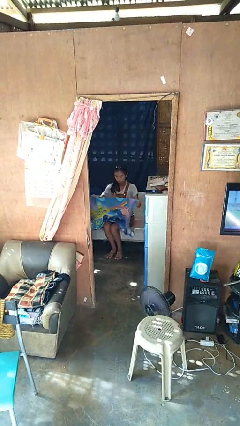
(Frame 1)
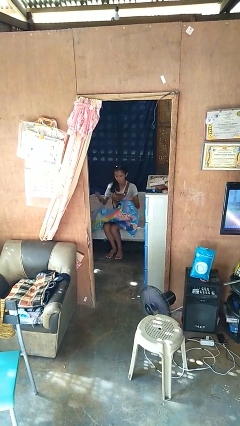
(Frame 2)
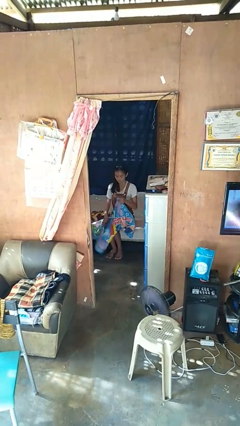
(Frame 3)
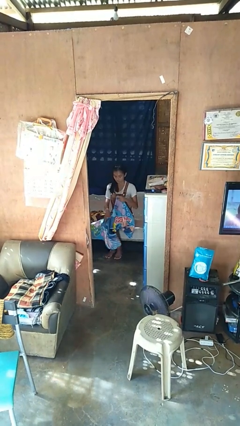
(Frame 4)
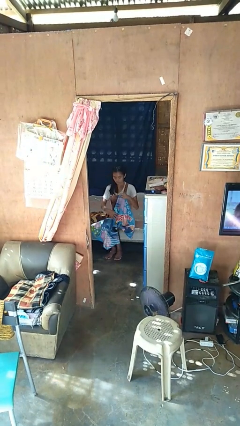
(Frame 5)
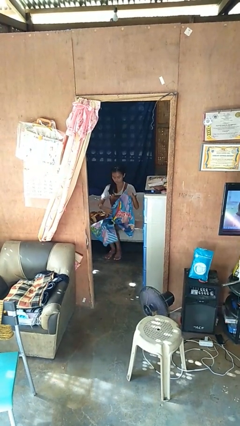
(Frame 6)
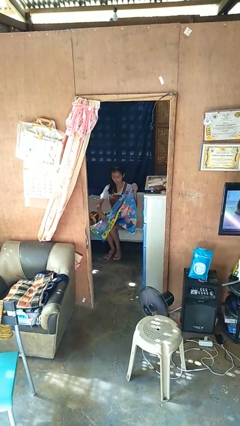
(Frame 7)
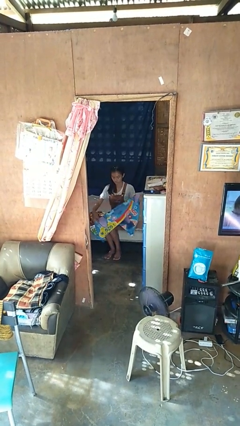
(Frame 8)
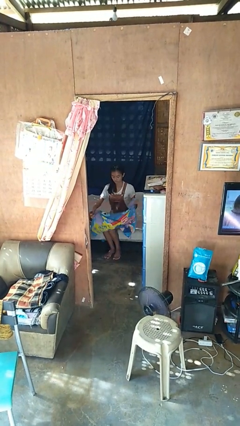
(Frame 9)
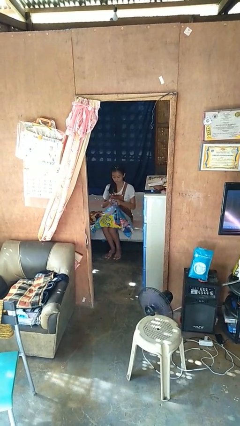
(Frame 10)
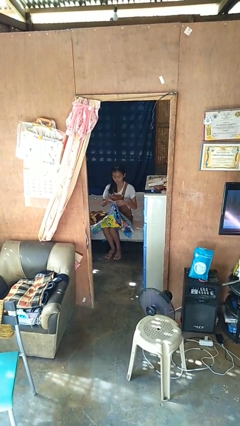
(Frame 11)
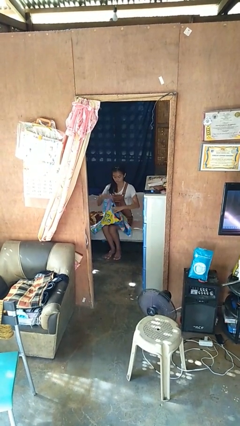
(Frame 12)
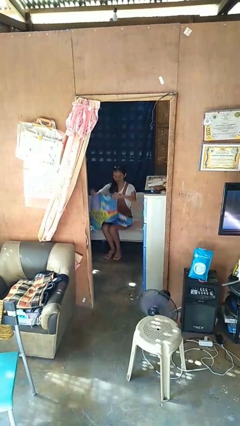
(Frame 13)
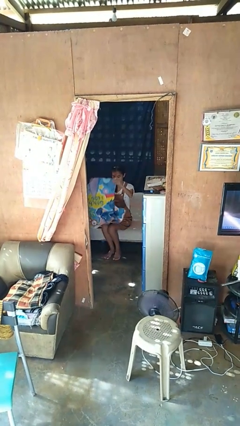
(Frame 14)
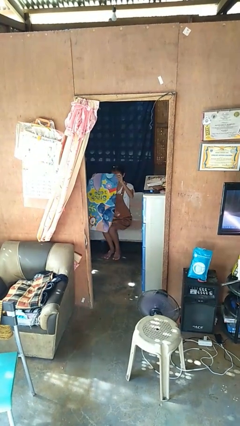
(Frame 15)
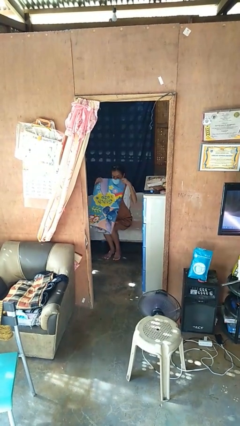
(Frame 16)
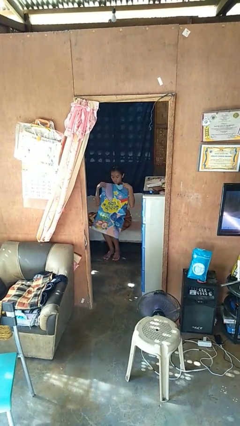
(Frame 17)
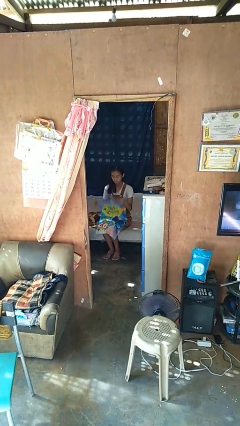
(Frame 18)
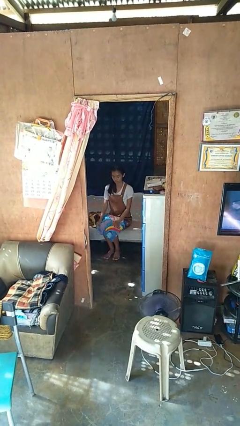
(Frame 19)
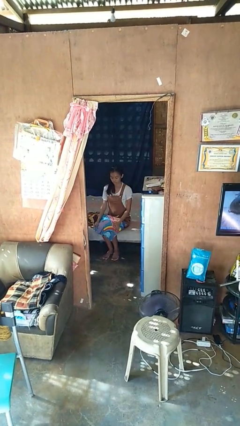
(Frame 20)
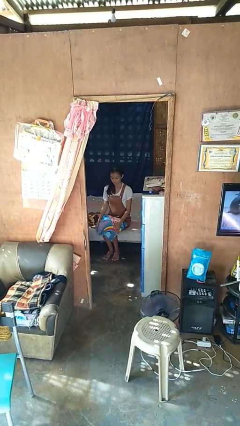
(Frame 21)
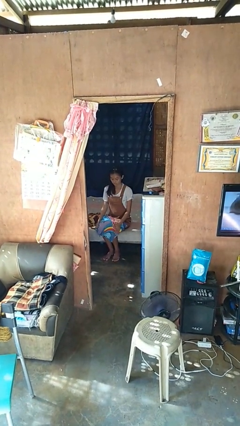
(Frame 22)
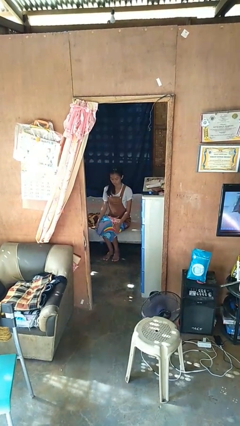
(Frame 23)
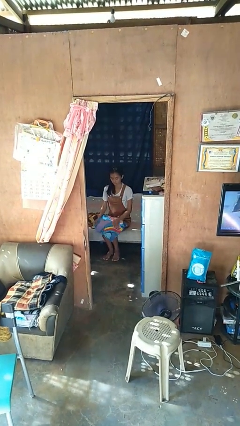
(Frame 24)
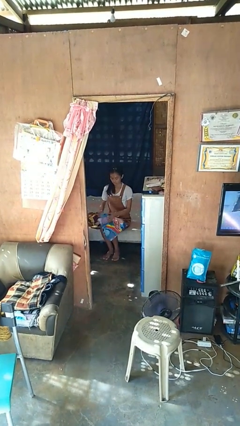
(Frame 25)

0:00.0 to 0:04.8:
person folds blanket

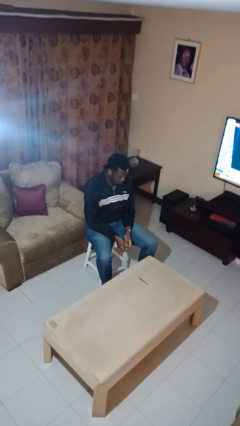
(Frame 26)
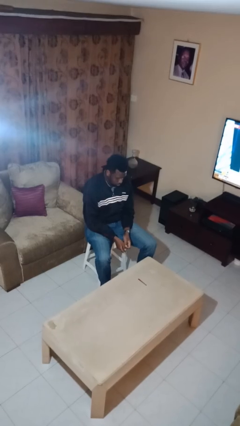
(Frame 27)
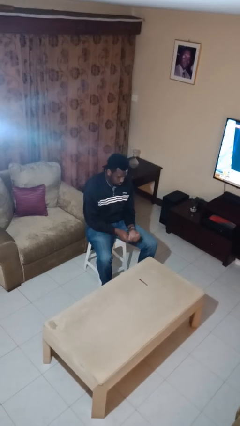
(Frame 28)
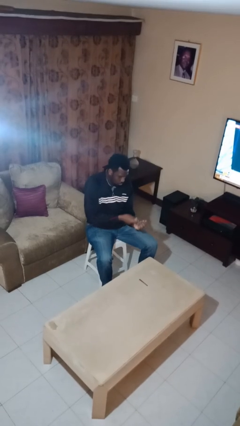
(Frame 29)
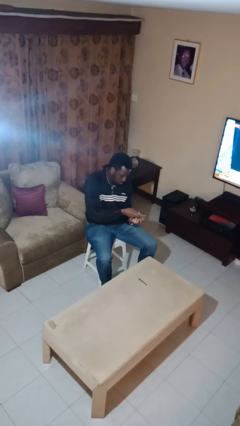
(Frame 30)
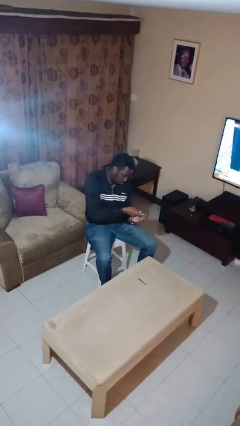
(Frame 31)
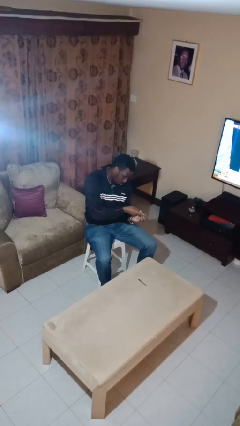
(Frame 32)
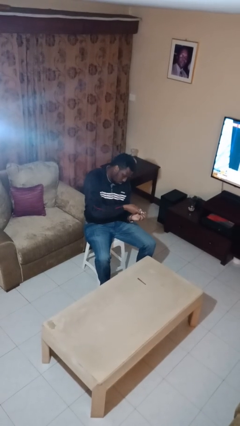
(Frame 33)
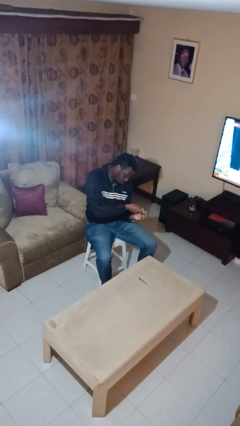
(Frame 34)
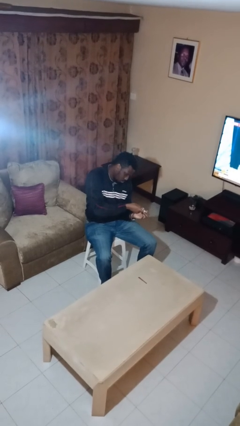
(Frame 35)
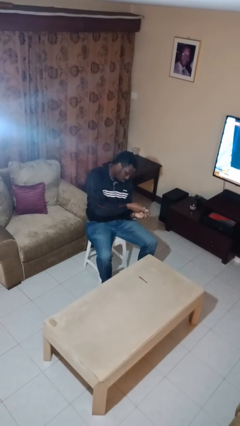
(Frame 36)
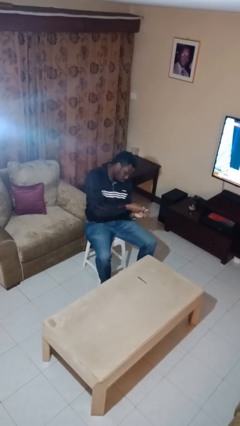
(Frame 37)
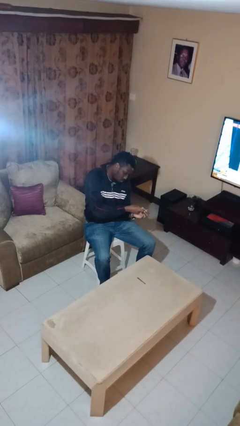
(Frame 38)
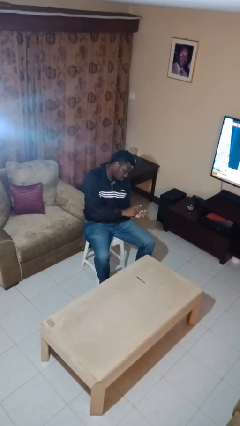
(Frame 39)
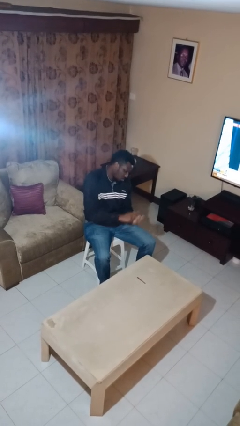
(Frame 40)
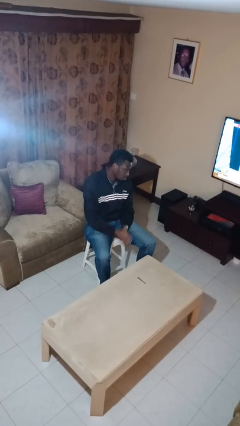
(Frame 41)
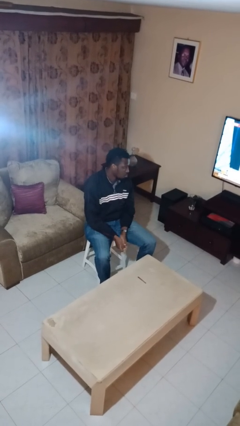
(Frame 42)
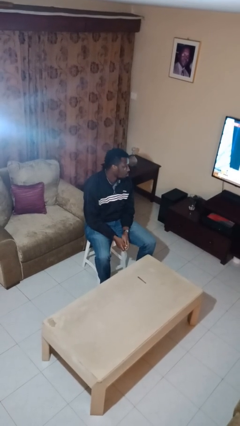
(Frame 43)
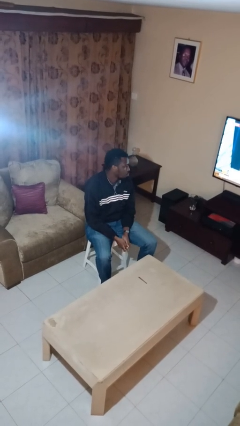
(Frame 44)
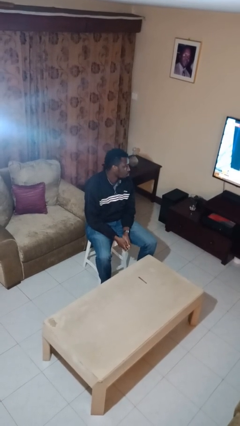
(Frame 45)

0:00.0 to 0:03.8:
person clips fingernails

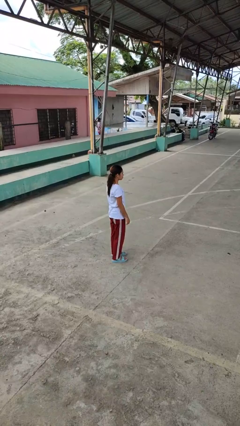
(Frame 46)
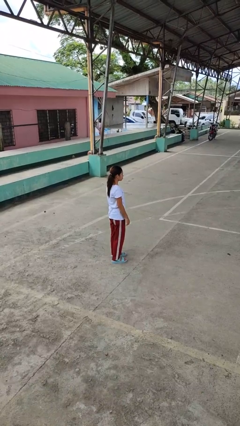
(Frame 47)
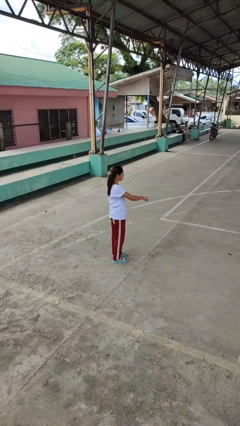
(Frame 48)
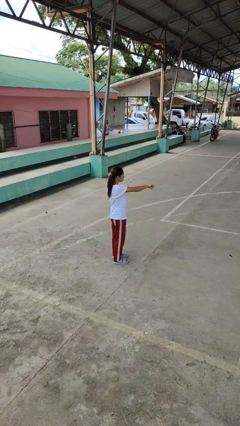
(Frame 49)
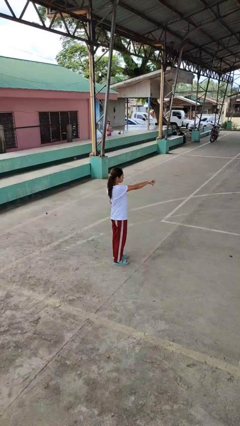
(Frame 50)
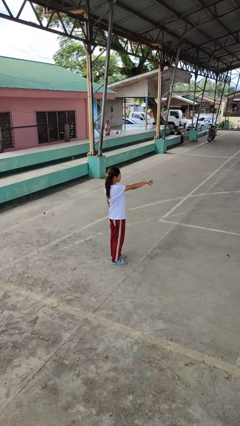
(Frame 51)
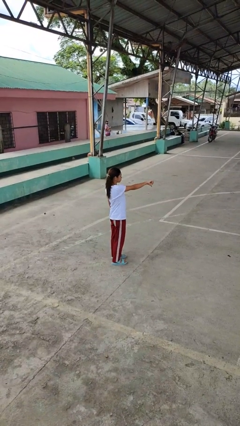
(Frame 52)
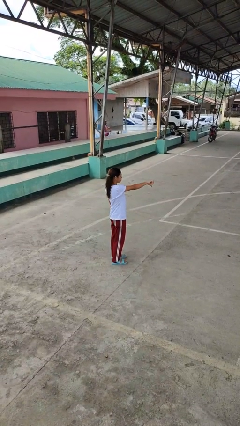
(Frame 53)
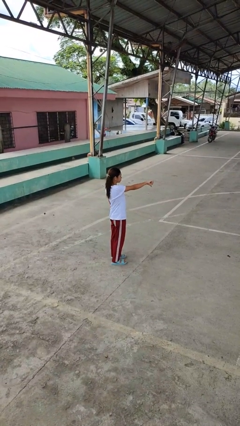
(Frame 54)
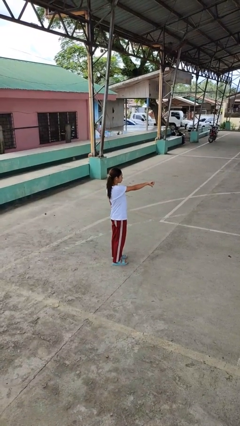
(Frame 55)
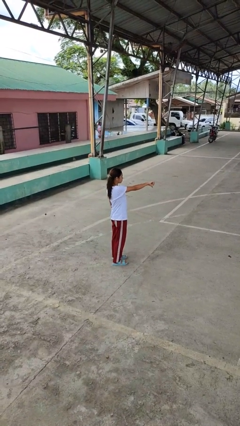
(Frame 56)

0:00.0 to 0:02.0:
person gestures thumbs down

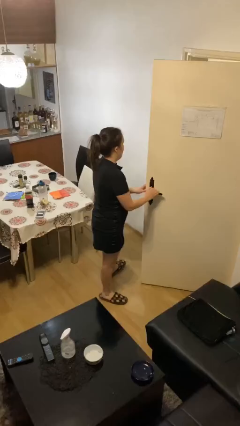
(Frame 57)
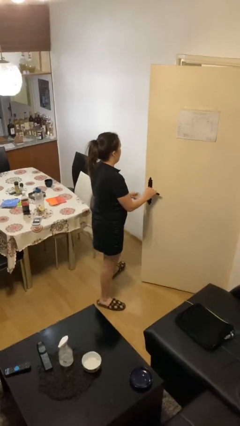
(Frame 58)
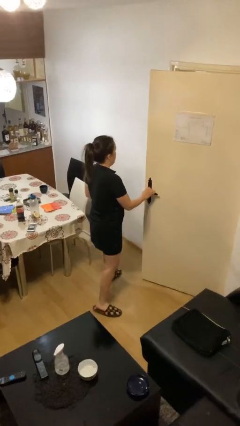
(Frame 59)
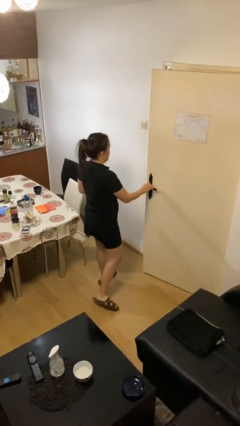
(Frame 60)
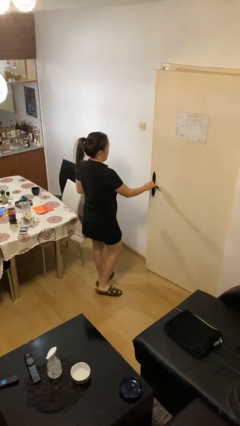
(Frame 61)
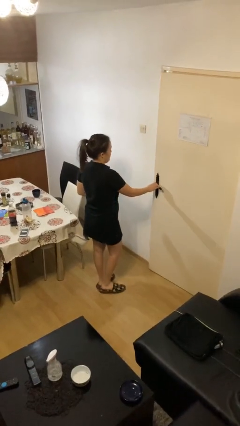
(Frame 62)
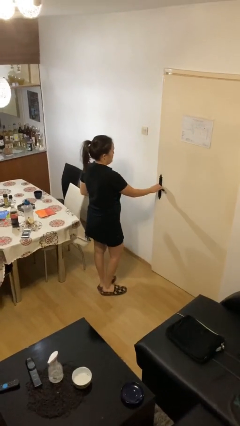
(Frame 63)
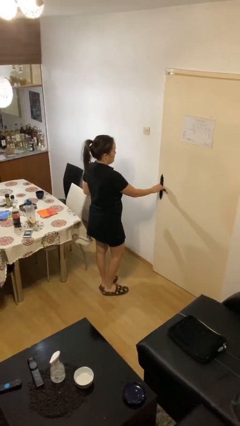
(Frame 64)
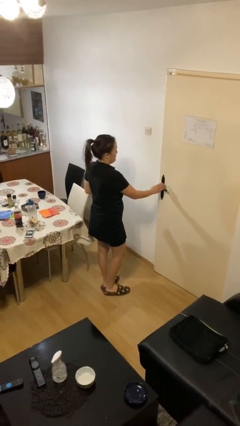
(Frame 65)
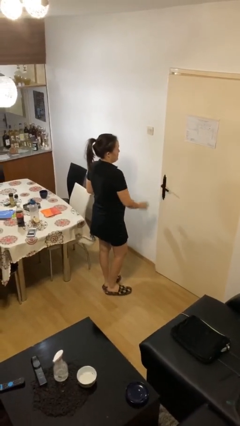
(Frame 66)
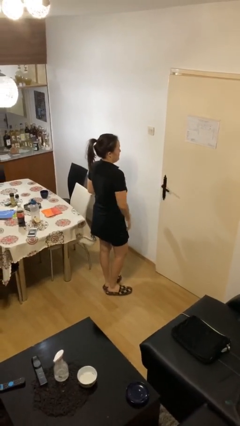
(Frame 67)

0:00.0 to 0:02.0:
person closes facility door

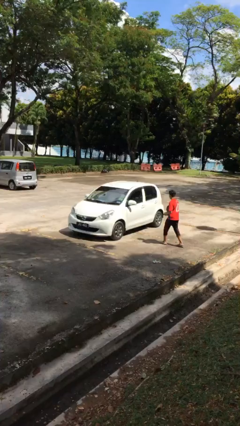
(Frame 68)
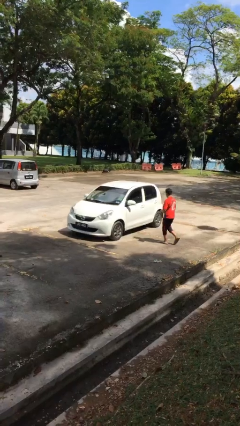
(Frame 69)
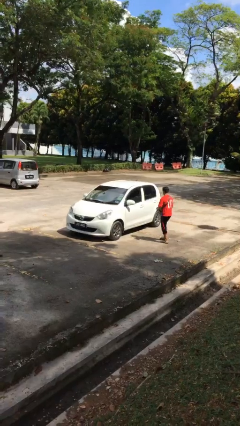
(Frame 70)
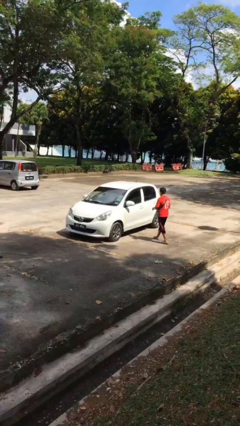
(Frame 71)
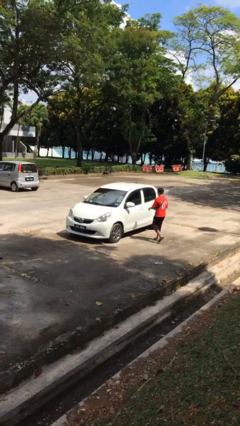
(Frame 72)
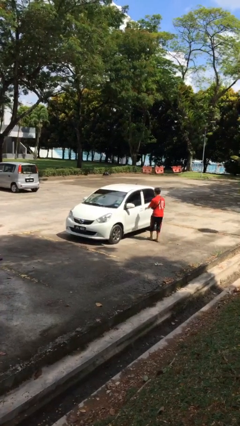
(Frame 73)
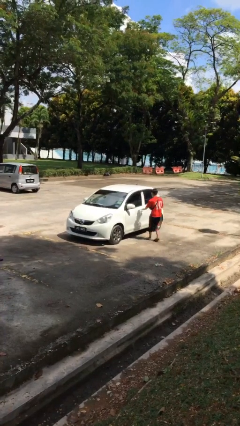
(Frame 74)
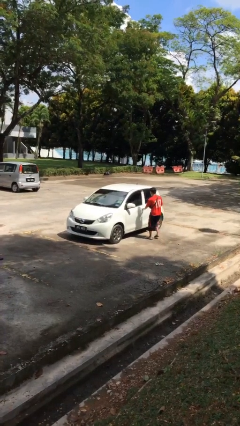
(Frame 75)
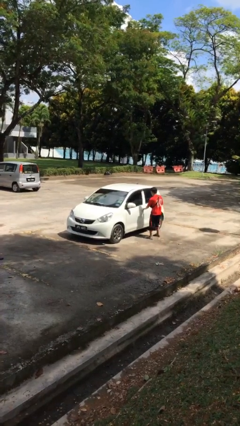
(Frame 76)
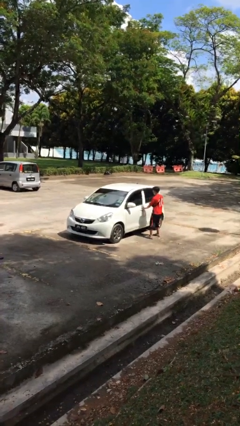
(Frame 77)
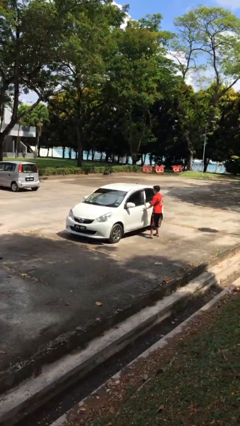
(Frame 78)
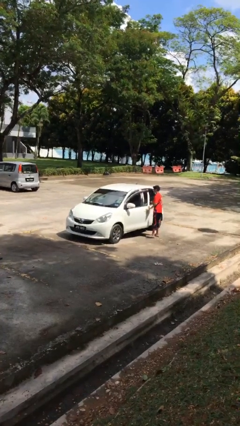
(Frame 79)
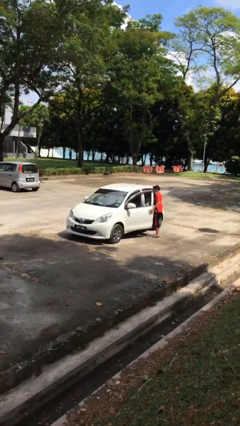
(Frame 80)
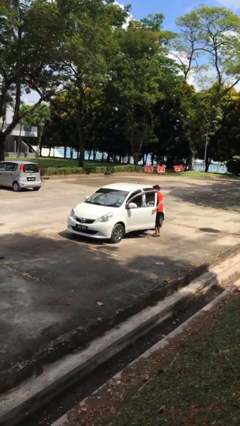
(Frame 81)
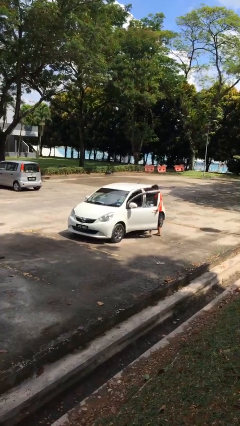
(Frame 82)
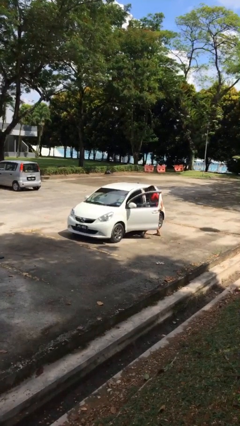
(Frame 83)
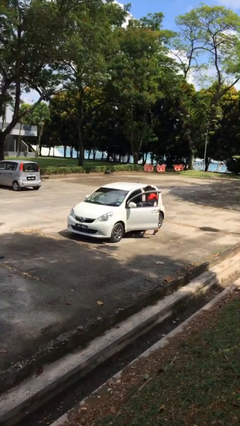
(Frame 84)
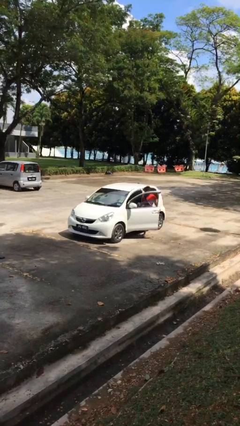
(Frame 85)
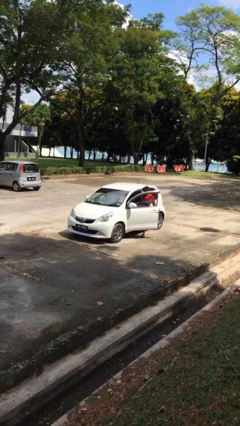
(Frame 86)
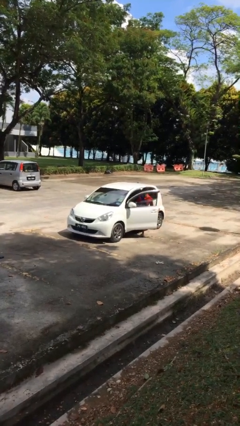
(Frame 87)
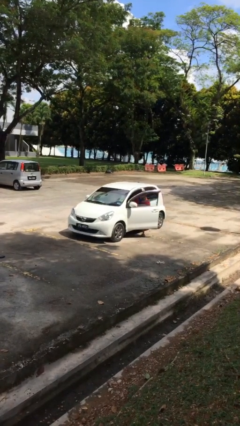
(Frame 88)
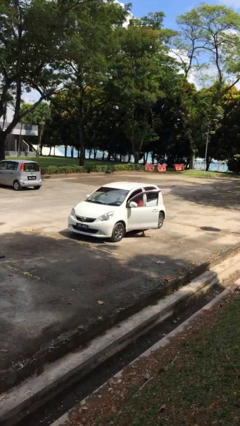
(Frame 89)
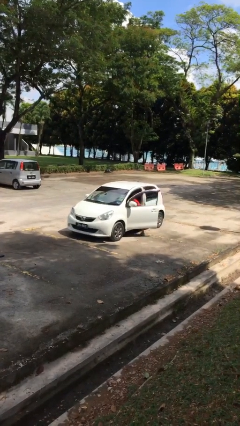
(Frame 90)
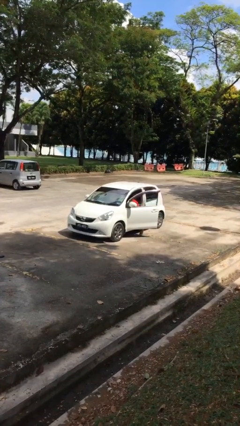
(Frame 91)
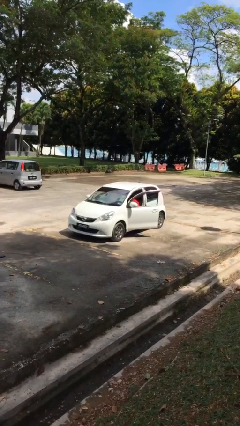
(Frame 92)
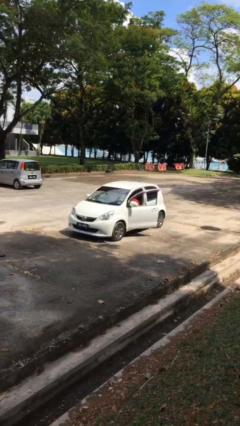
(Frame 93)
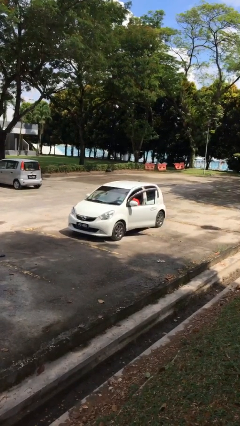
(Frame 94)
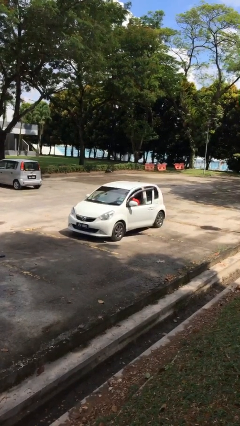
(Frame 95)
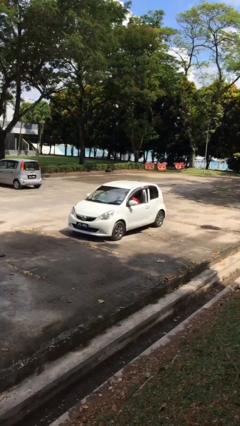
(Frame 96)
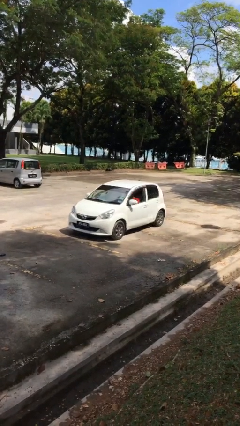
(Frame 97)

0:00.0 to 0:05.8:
car picks up person
